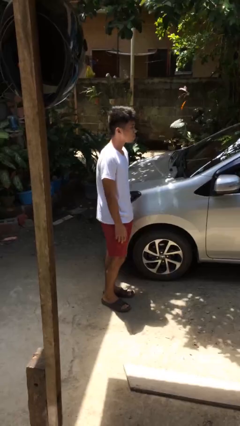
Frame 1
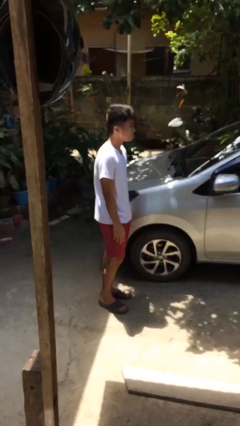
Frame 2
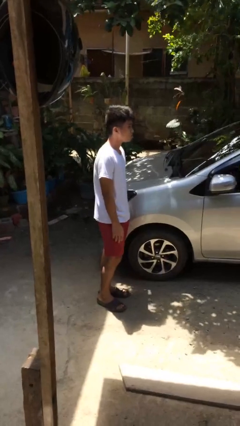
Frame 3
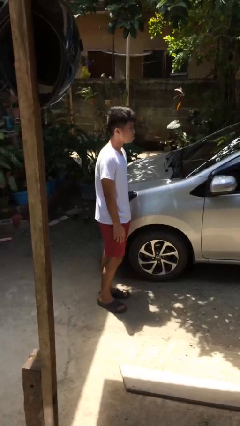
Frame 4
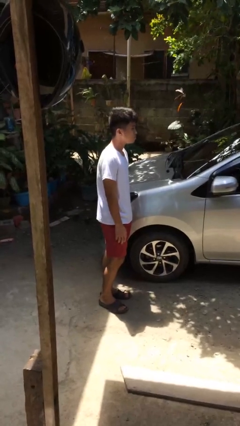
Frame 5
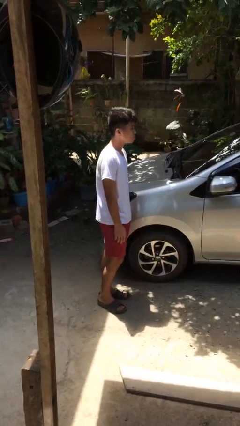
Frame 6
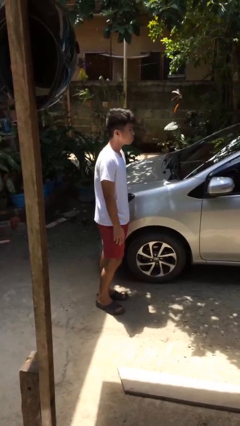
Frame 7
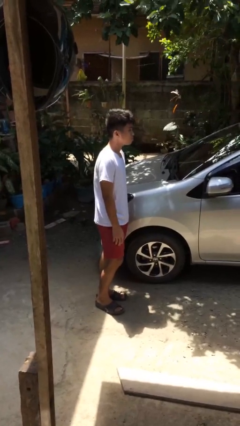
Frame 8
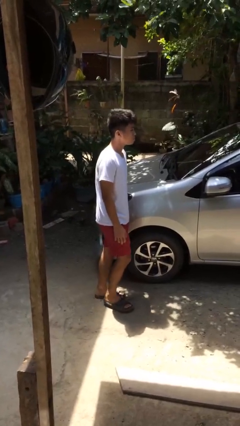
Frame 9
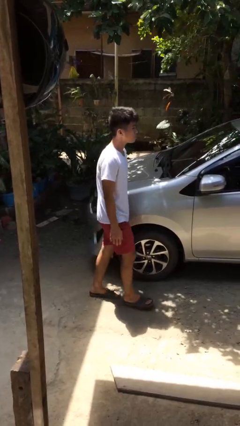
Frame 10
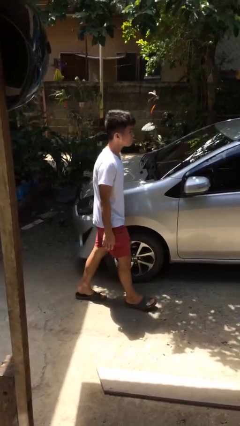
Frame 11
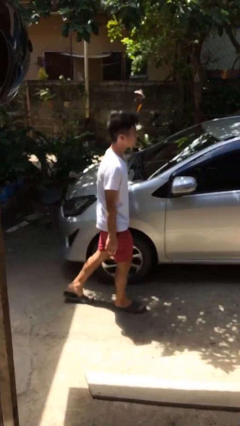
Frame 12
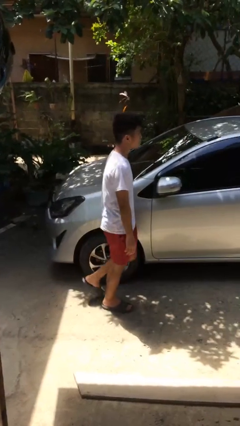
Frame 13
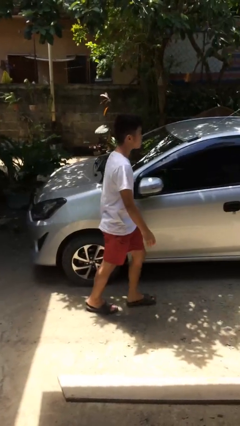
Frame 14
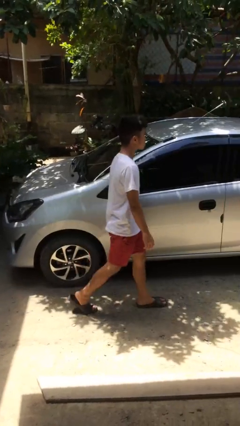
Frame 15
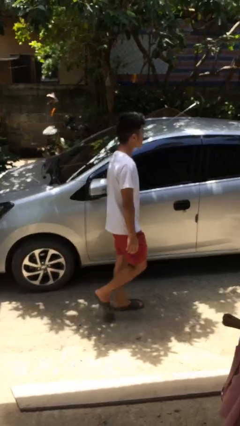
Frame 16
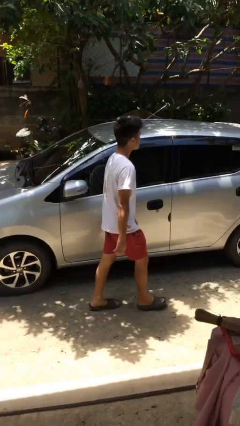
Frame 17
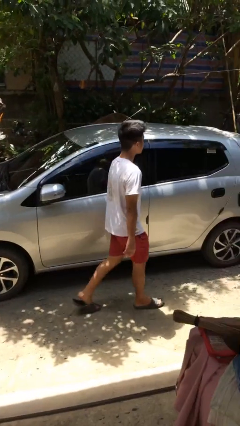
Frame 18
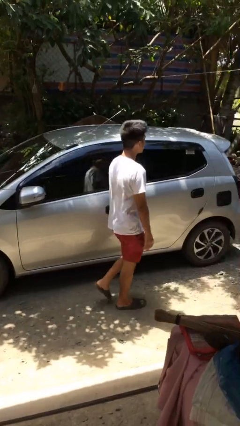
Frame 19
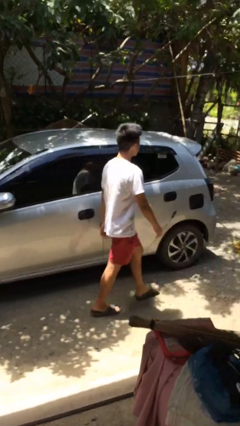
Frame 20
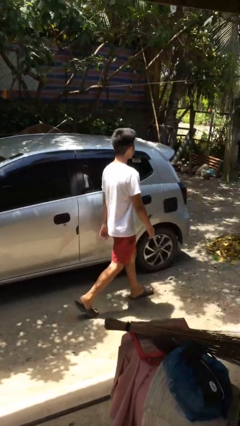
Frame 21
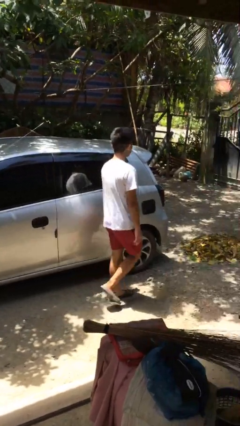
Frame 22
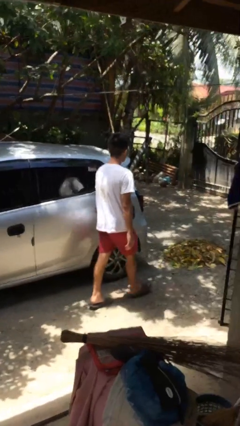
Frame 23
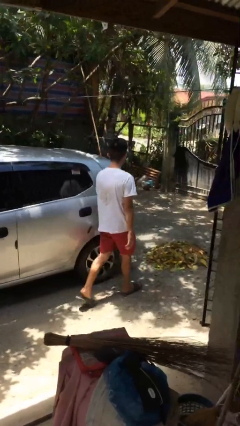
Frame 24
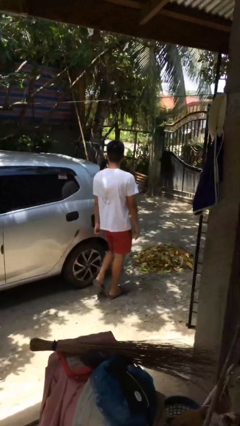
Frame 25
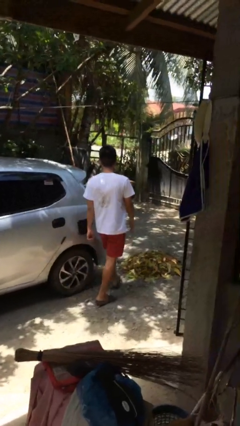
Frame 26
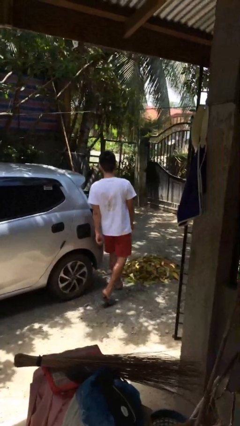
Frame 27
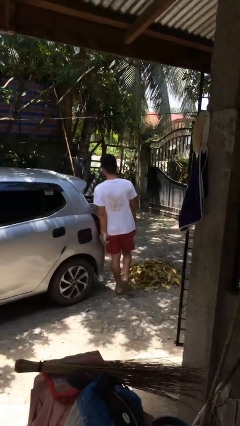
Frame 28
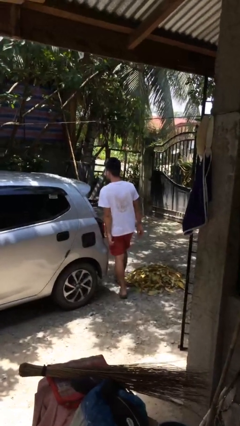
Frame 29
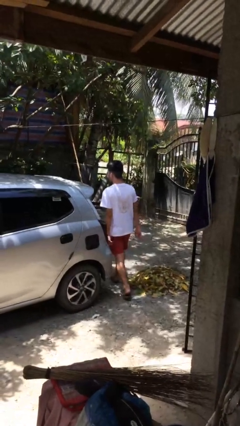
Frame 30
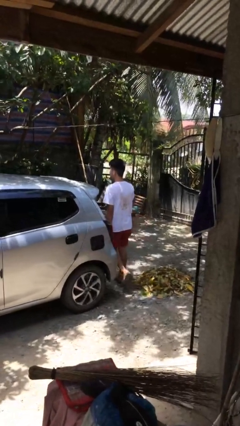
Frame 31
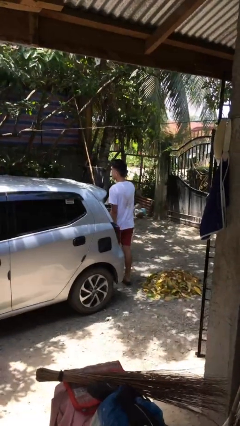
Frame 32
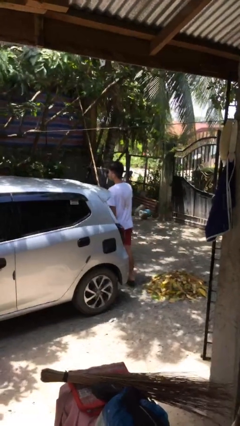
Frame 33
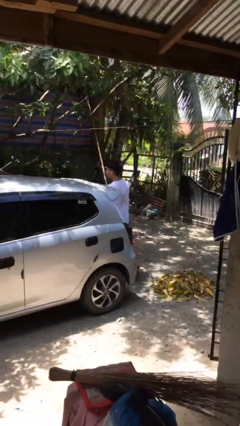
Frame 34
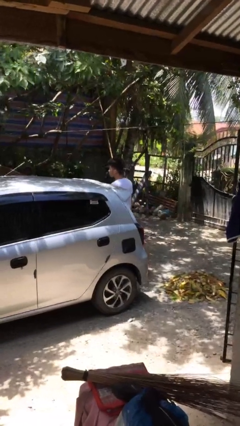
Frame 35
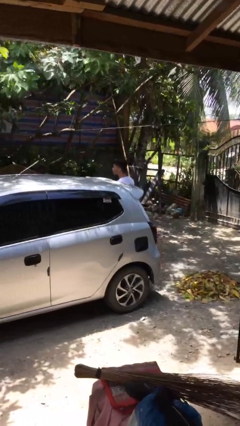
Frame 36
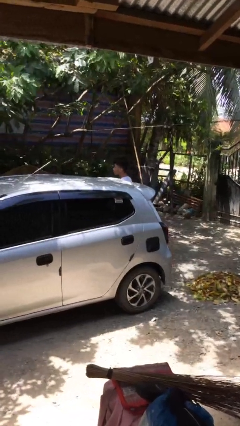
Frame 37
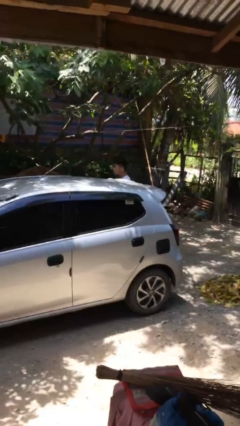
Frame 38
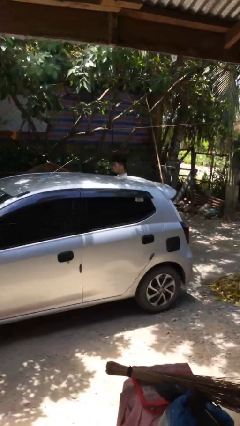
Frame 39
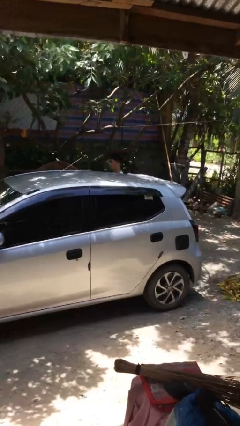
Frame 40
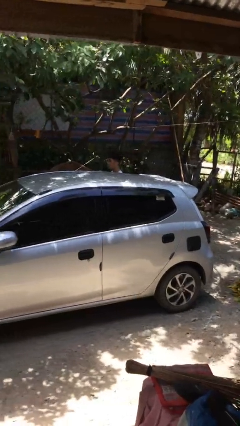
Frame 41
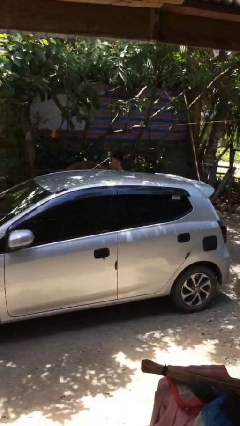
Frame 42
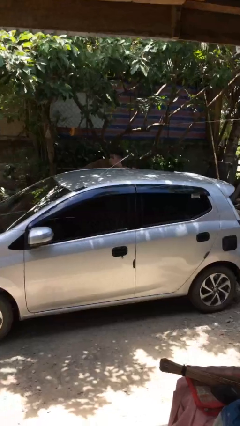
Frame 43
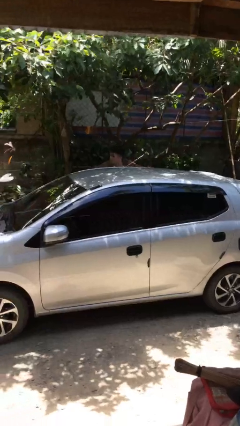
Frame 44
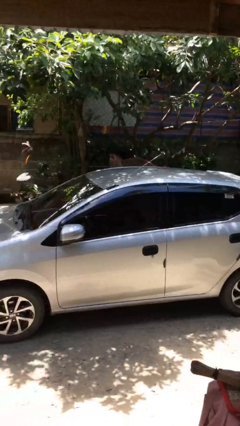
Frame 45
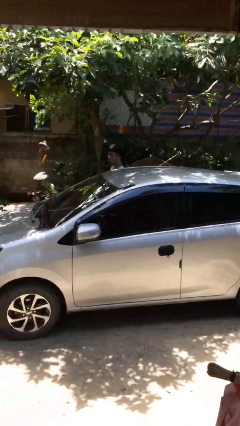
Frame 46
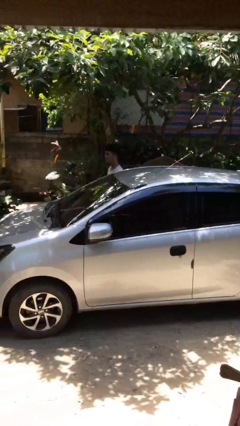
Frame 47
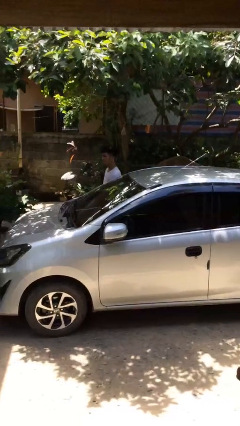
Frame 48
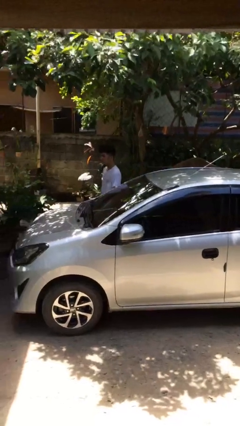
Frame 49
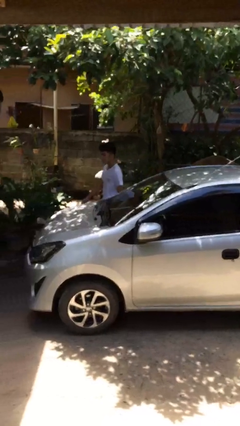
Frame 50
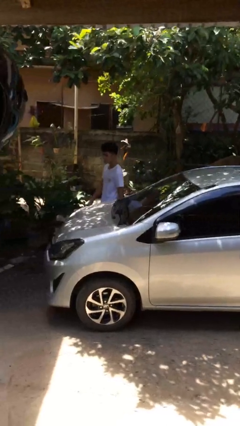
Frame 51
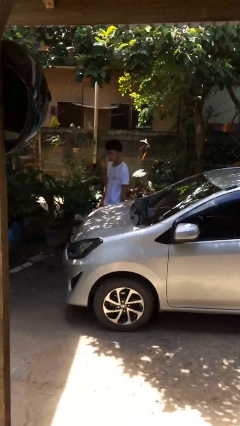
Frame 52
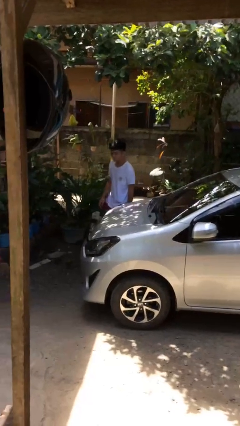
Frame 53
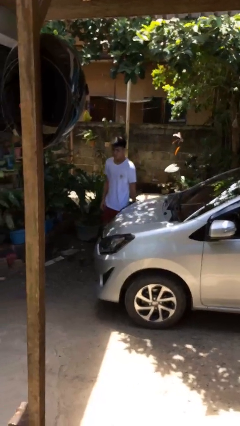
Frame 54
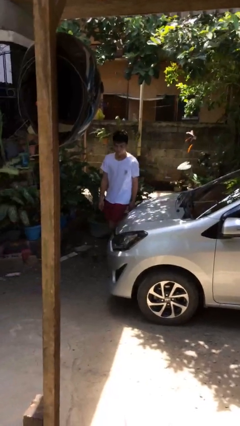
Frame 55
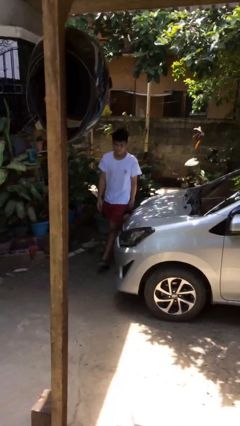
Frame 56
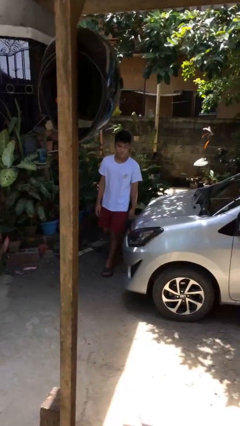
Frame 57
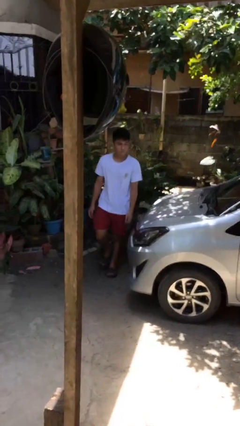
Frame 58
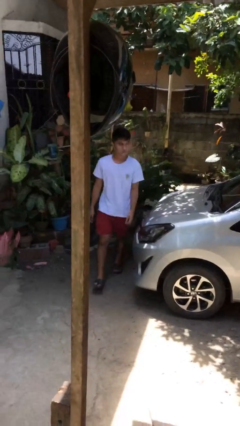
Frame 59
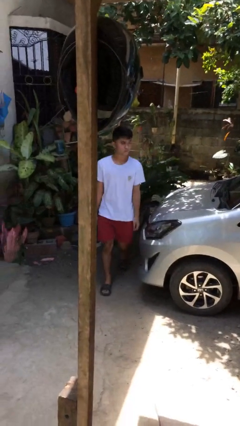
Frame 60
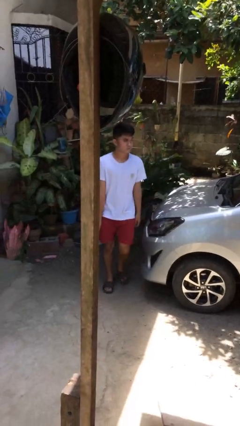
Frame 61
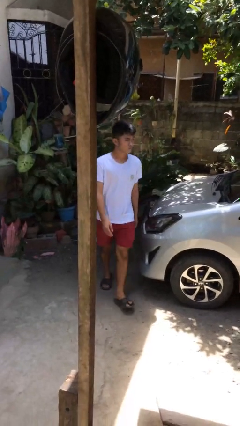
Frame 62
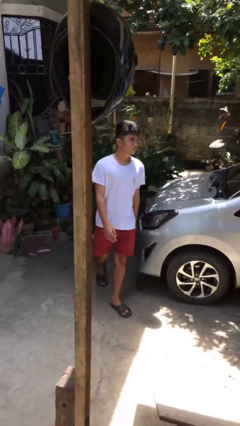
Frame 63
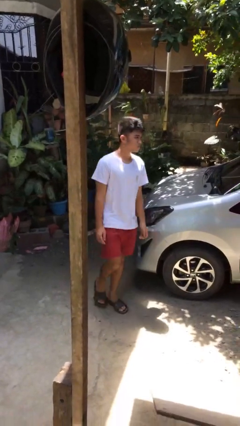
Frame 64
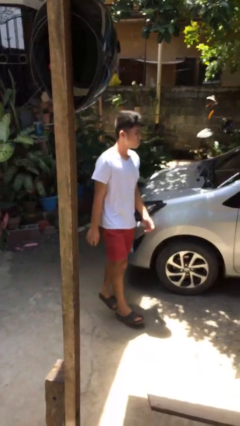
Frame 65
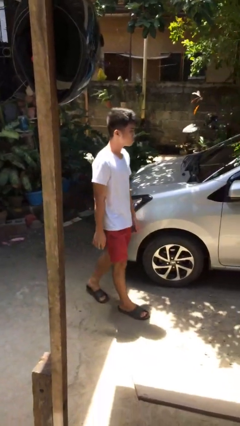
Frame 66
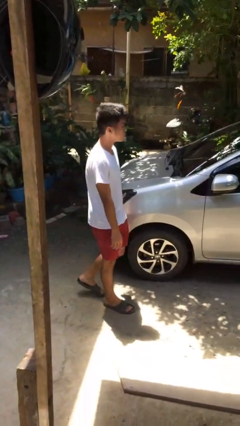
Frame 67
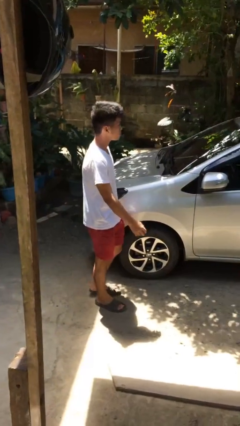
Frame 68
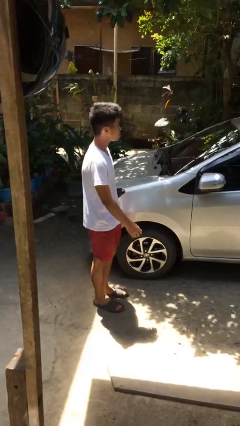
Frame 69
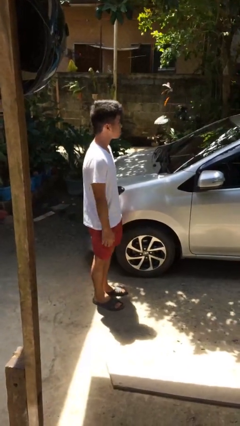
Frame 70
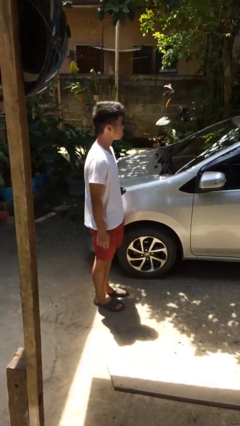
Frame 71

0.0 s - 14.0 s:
person walks around car

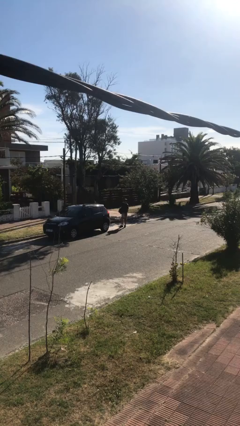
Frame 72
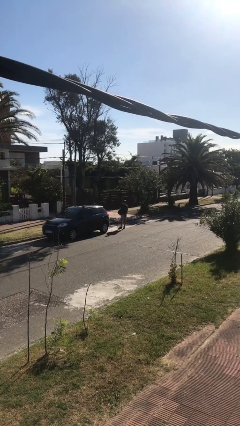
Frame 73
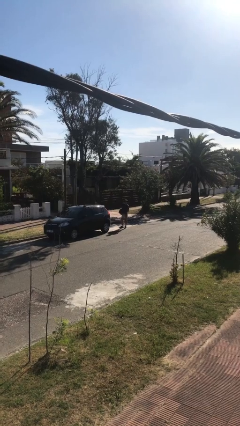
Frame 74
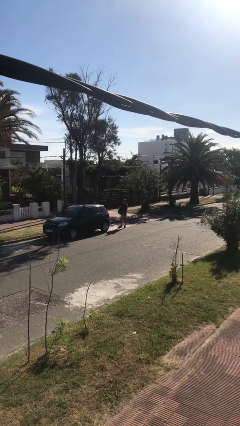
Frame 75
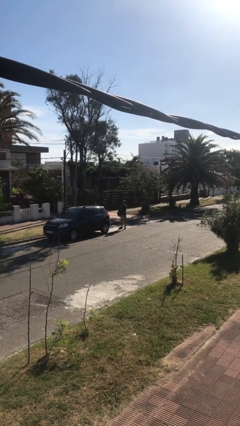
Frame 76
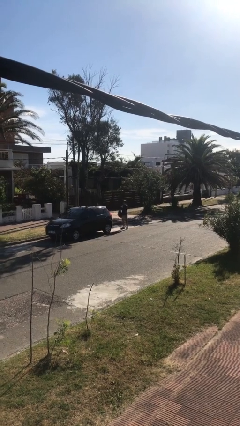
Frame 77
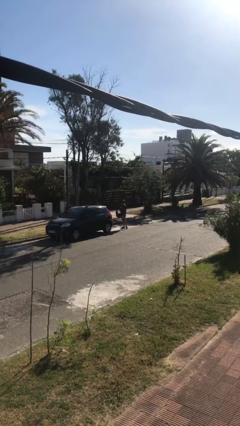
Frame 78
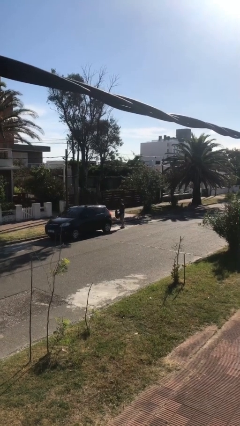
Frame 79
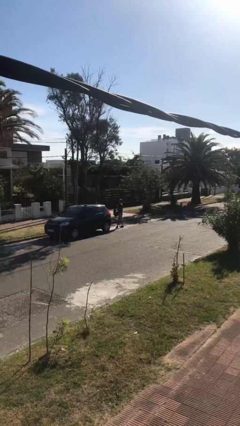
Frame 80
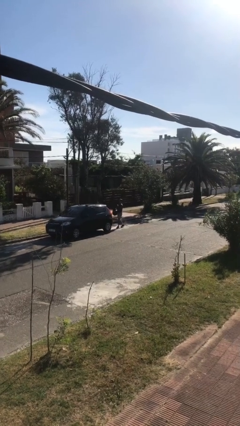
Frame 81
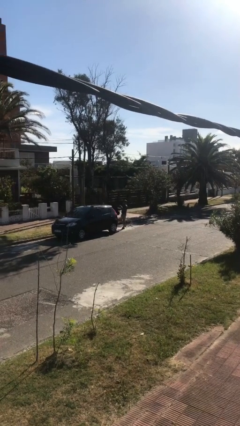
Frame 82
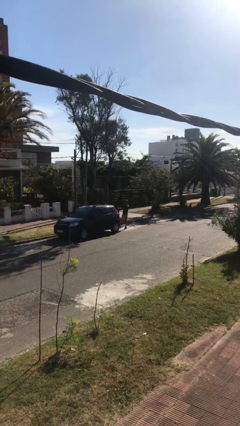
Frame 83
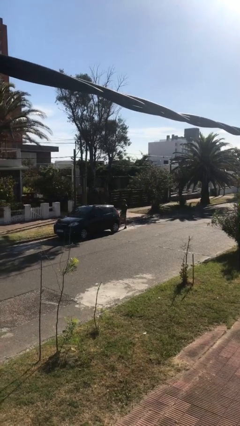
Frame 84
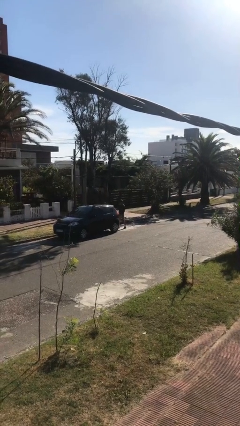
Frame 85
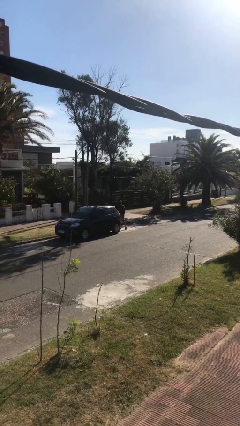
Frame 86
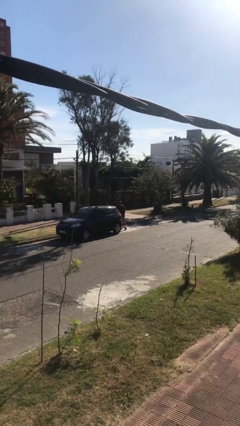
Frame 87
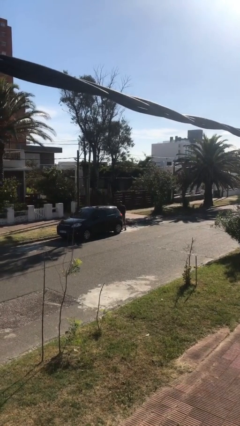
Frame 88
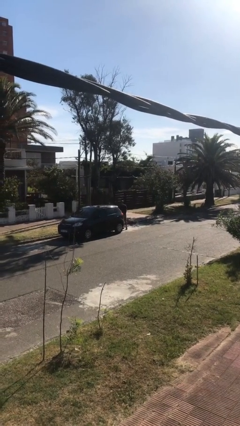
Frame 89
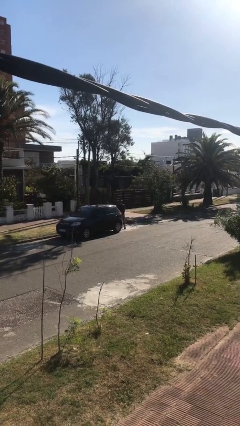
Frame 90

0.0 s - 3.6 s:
person loads car

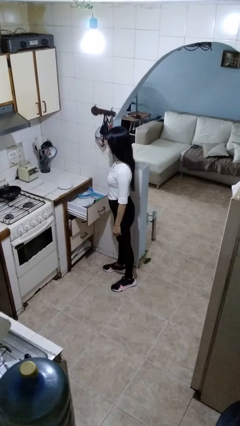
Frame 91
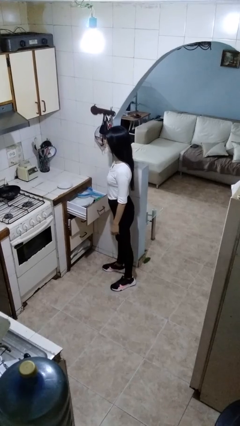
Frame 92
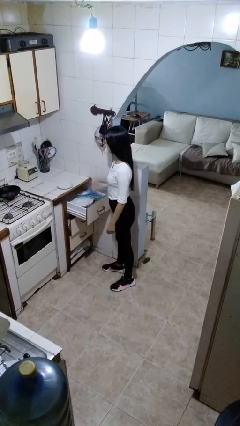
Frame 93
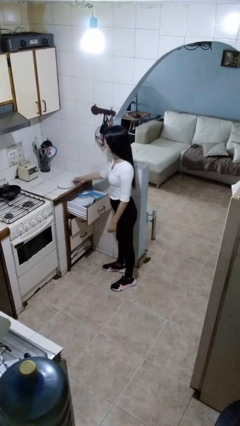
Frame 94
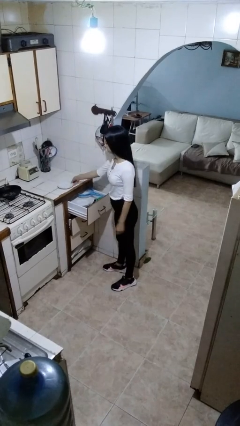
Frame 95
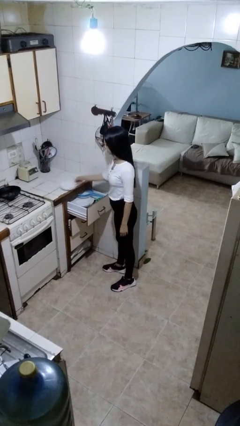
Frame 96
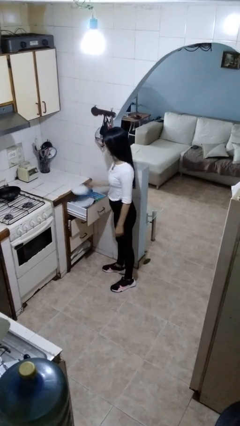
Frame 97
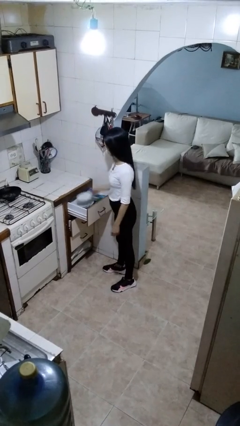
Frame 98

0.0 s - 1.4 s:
person puts object into kitchen drawer
